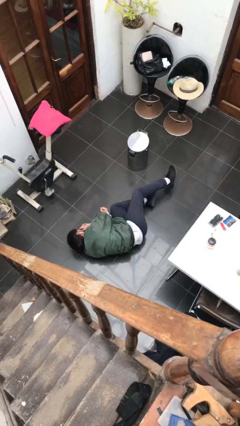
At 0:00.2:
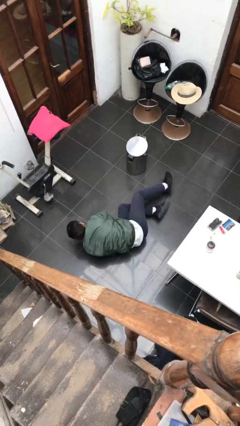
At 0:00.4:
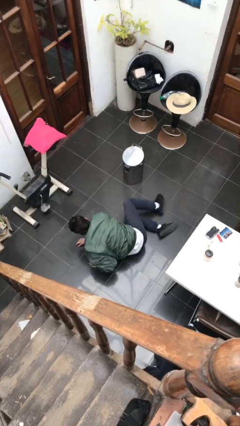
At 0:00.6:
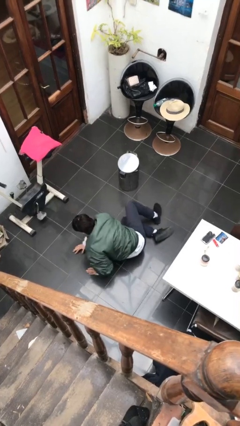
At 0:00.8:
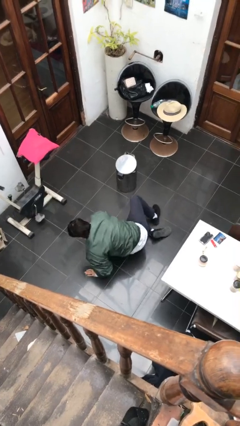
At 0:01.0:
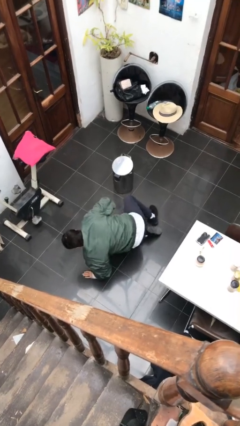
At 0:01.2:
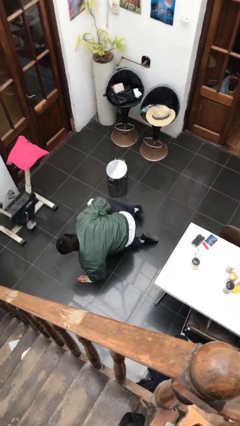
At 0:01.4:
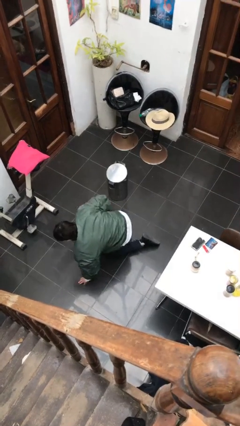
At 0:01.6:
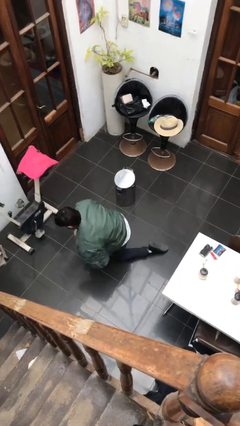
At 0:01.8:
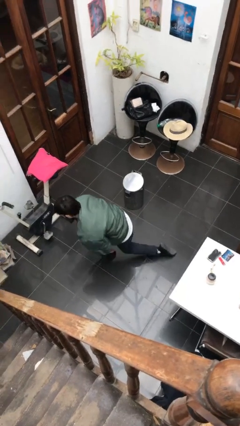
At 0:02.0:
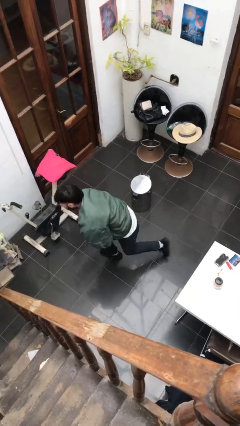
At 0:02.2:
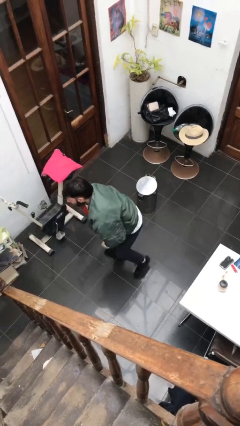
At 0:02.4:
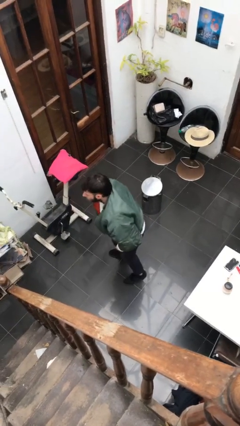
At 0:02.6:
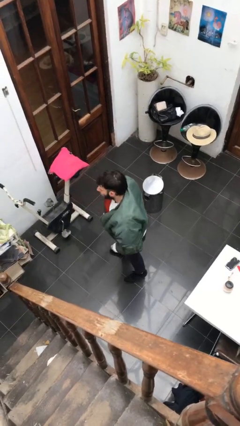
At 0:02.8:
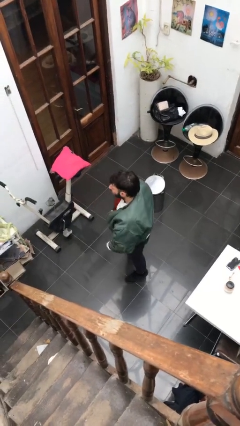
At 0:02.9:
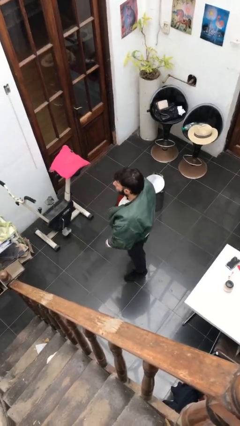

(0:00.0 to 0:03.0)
person stands up from floor

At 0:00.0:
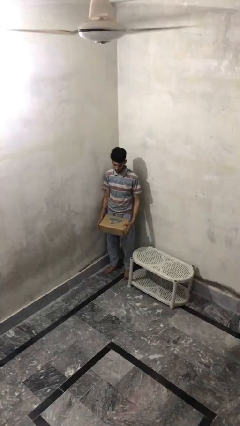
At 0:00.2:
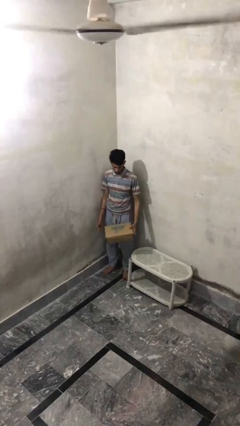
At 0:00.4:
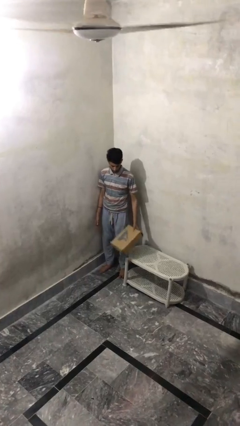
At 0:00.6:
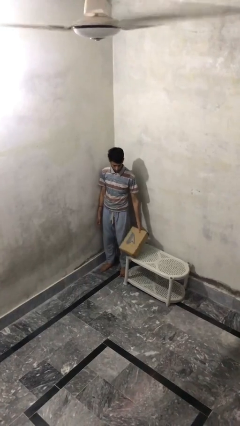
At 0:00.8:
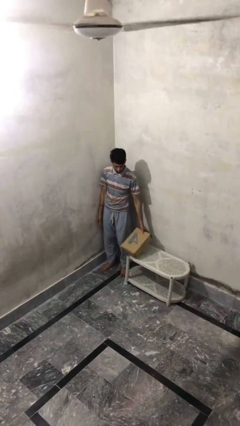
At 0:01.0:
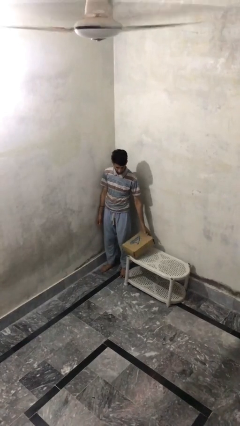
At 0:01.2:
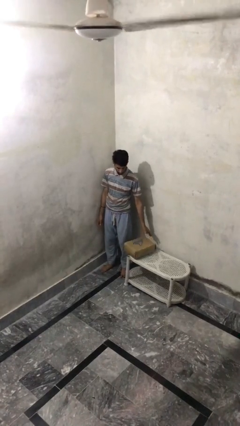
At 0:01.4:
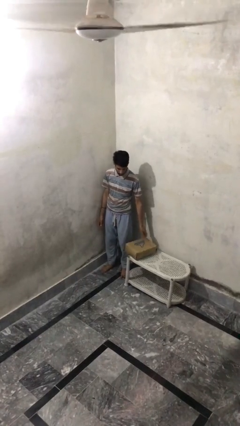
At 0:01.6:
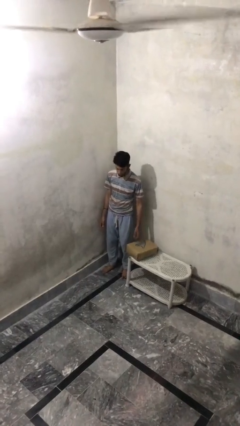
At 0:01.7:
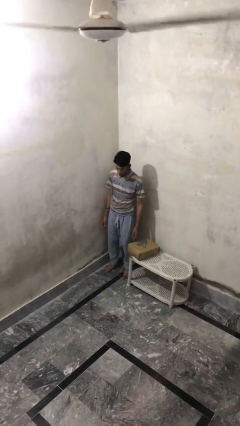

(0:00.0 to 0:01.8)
person puts down object on table

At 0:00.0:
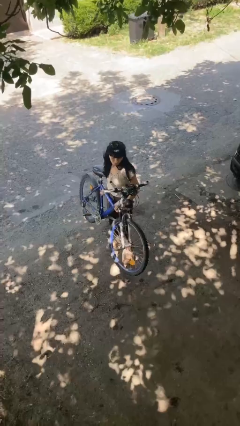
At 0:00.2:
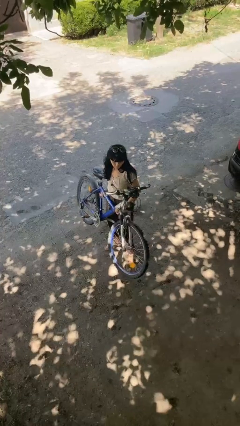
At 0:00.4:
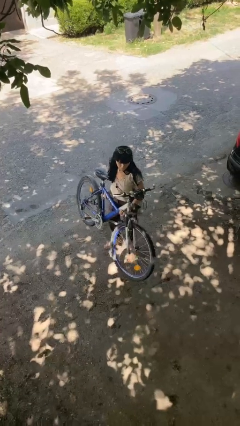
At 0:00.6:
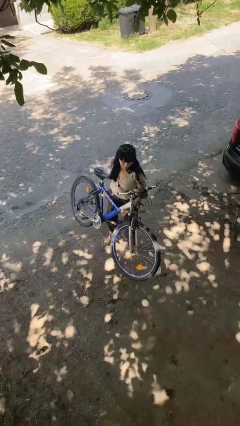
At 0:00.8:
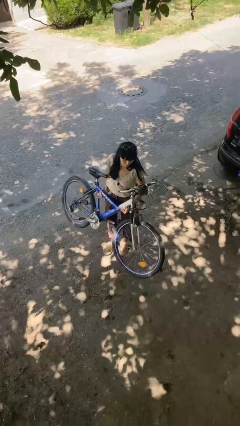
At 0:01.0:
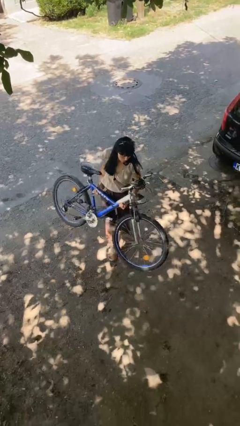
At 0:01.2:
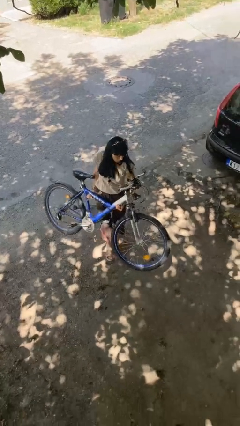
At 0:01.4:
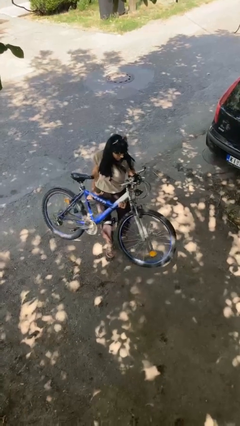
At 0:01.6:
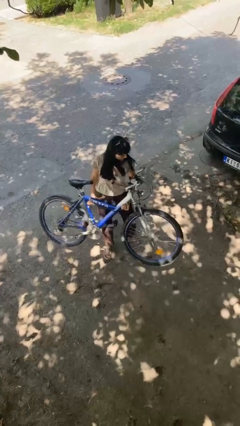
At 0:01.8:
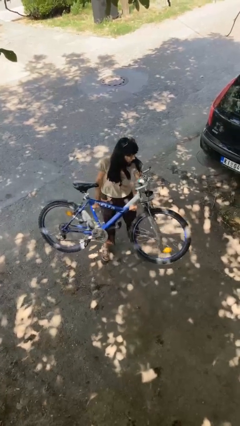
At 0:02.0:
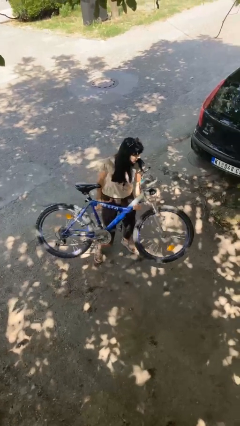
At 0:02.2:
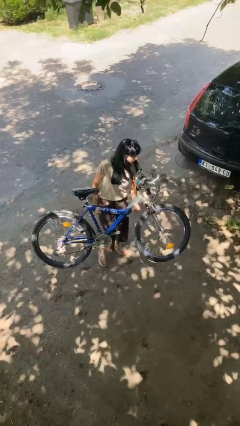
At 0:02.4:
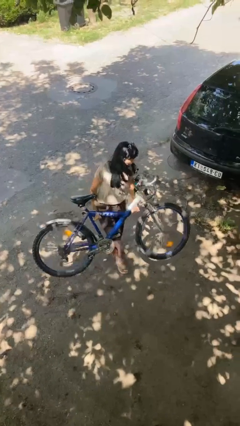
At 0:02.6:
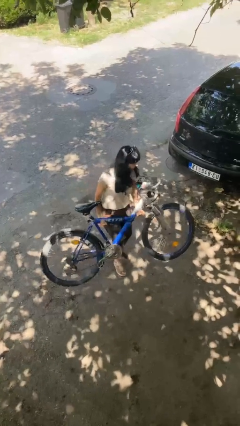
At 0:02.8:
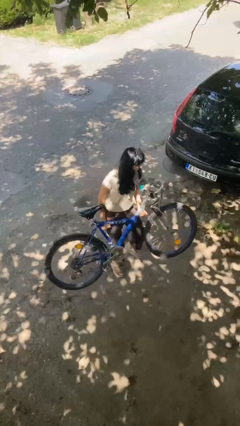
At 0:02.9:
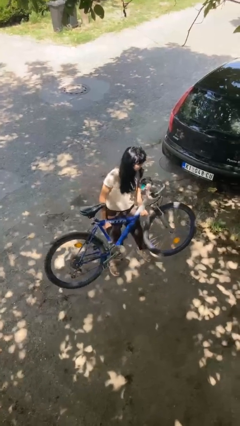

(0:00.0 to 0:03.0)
person carries bicycle

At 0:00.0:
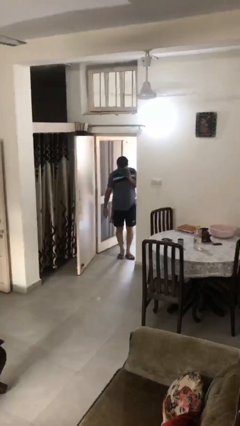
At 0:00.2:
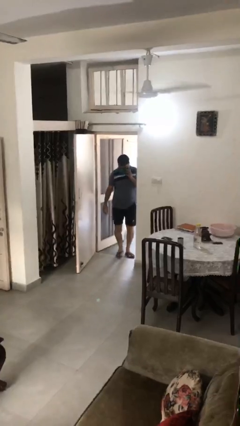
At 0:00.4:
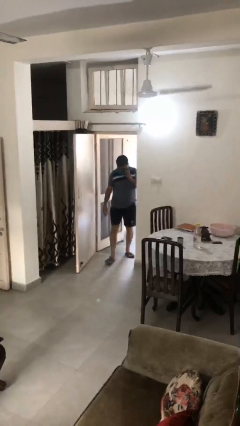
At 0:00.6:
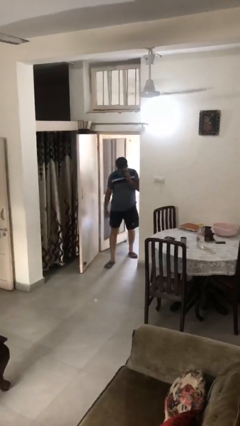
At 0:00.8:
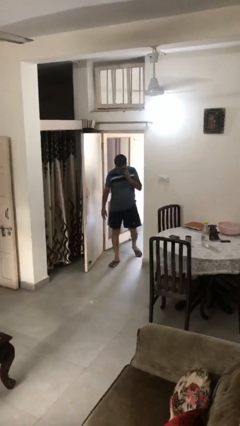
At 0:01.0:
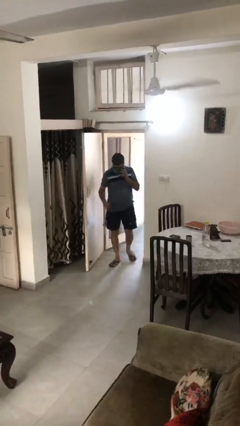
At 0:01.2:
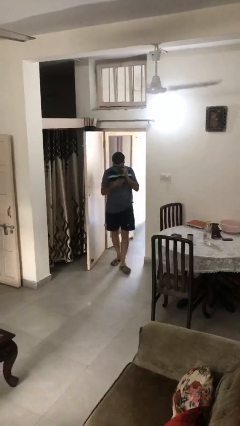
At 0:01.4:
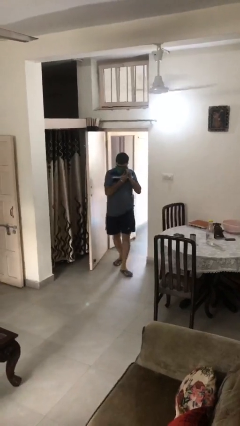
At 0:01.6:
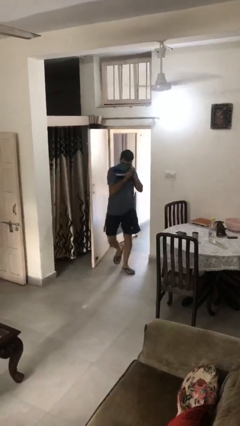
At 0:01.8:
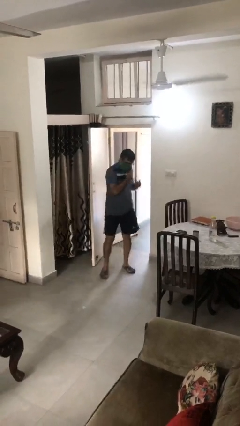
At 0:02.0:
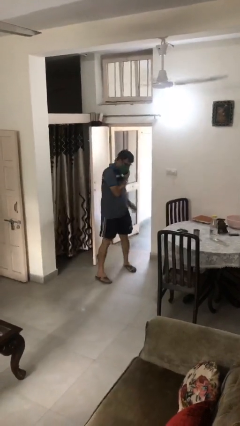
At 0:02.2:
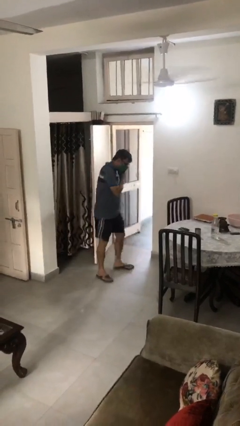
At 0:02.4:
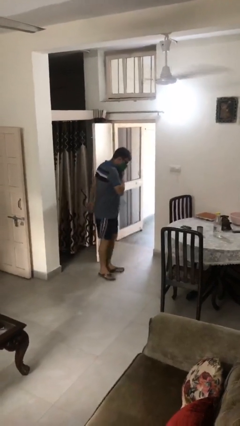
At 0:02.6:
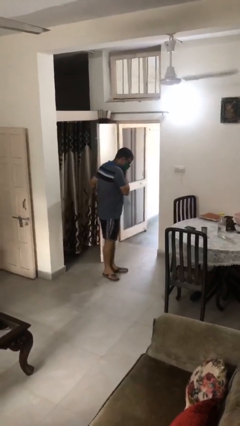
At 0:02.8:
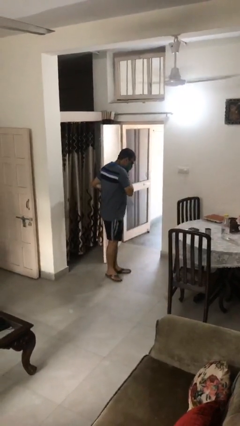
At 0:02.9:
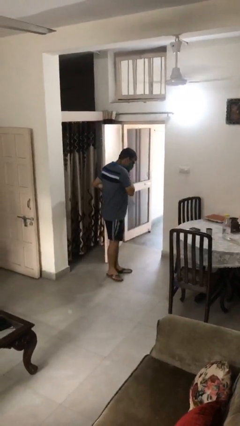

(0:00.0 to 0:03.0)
person enters scene through structure

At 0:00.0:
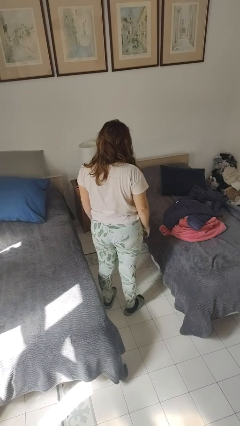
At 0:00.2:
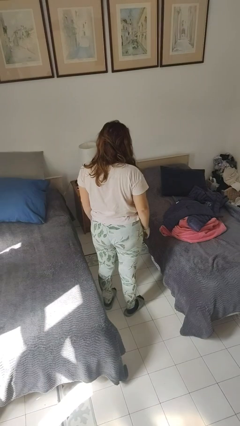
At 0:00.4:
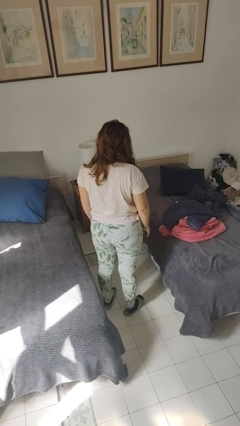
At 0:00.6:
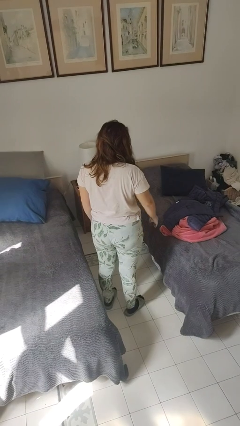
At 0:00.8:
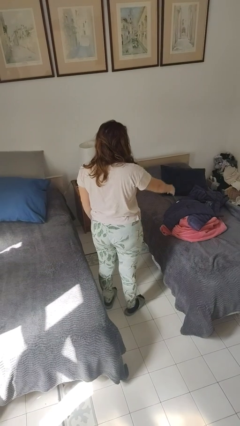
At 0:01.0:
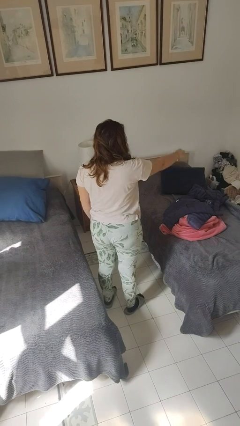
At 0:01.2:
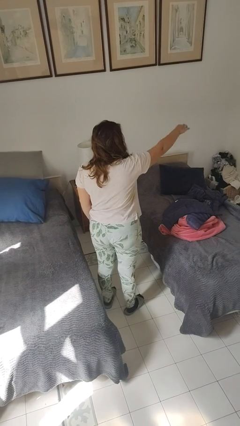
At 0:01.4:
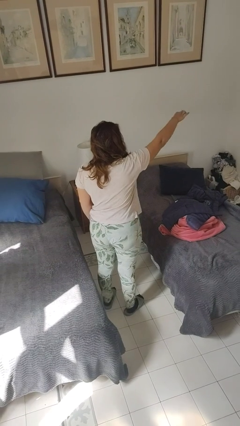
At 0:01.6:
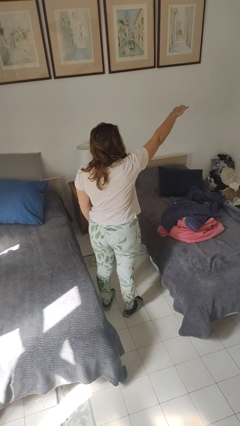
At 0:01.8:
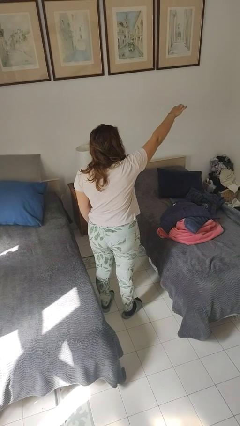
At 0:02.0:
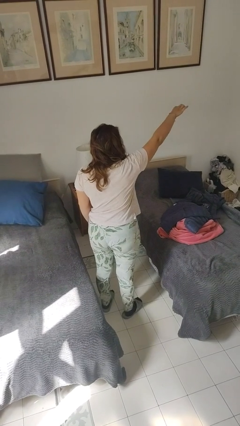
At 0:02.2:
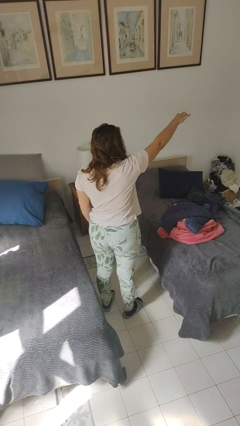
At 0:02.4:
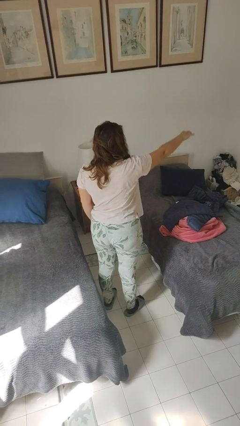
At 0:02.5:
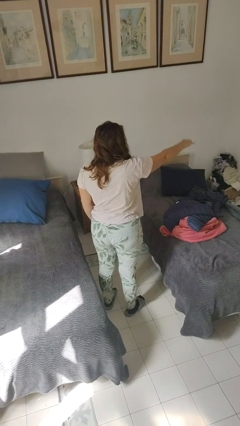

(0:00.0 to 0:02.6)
person gestures hang loose

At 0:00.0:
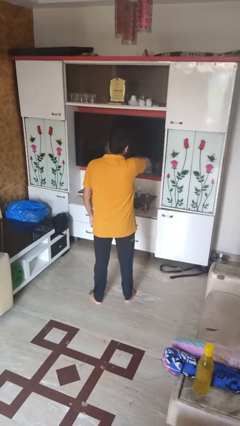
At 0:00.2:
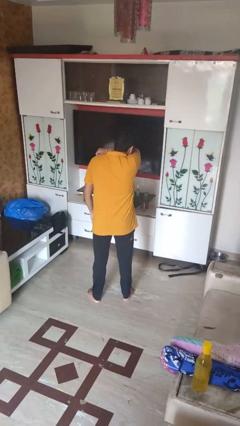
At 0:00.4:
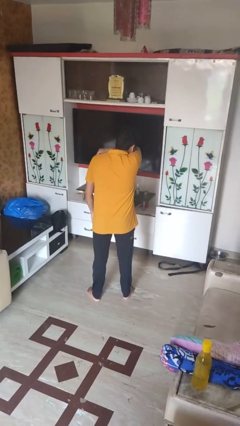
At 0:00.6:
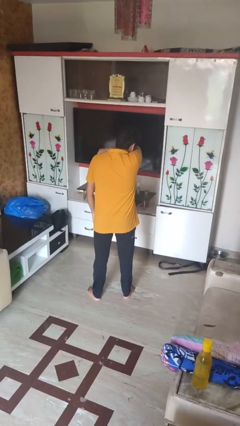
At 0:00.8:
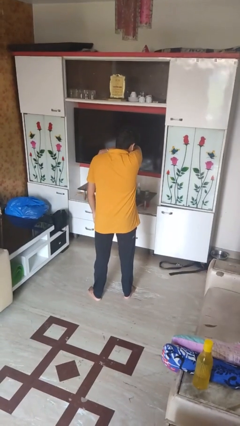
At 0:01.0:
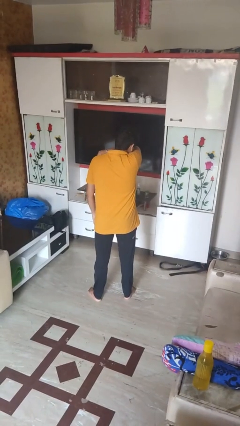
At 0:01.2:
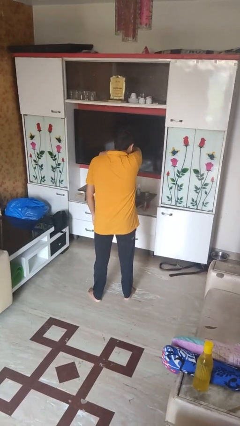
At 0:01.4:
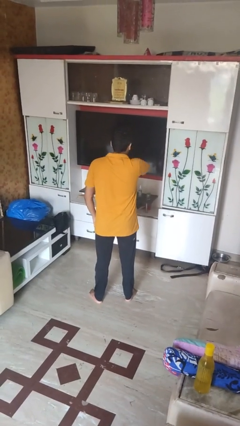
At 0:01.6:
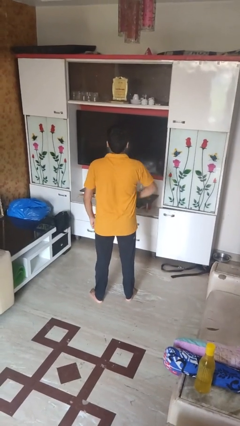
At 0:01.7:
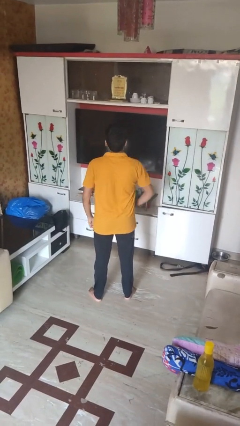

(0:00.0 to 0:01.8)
person sneezes into arm

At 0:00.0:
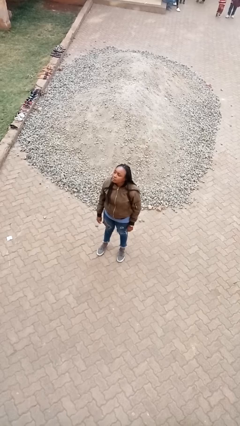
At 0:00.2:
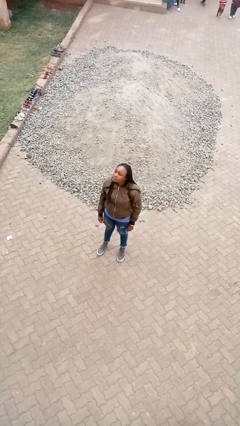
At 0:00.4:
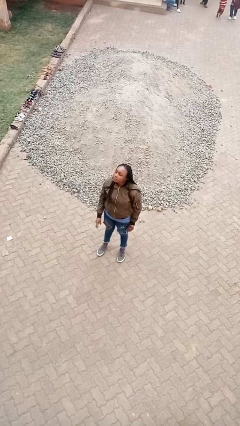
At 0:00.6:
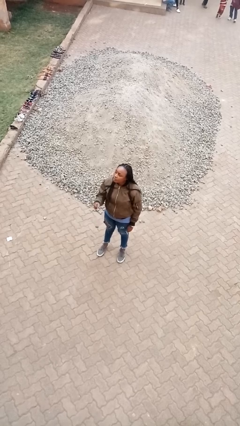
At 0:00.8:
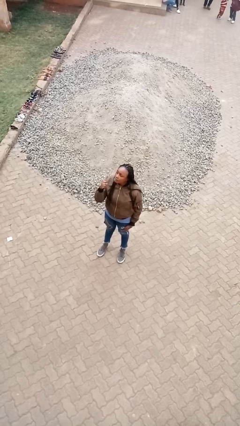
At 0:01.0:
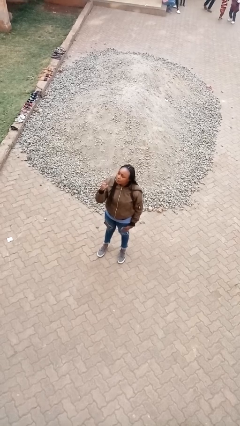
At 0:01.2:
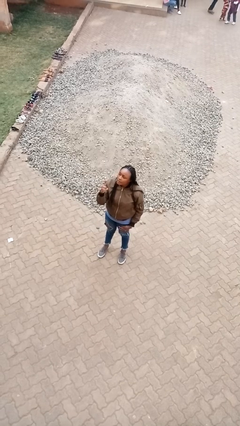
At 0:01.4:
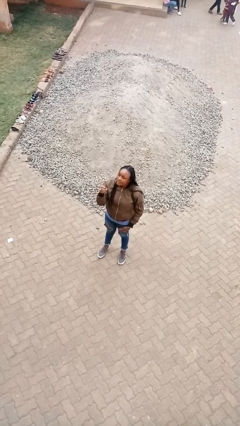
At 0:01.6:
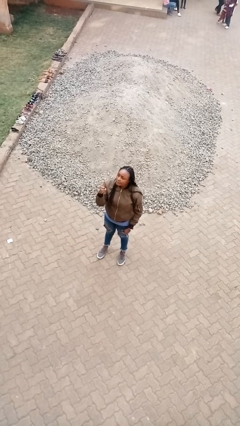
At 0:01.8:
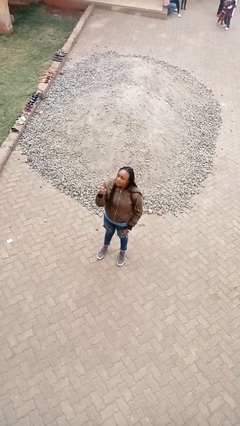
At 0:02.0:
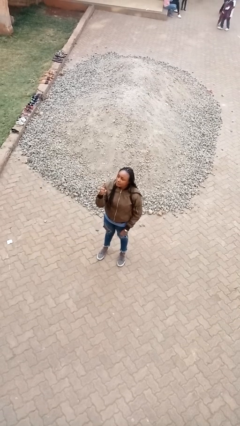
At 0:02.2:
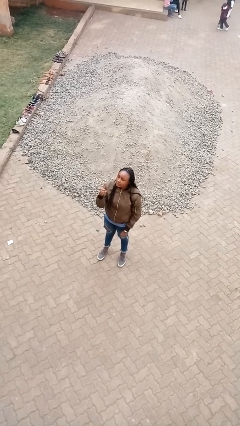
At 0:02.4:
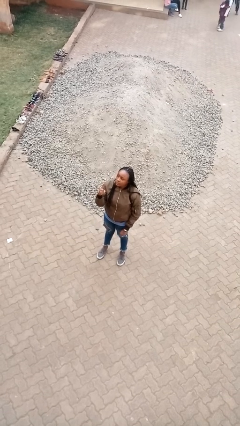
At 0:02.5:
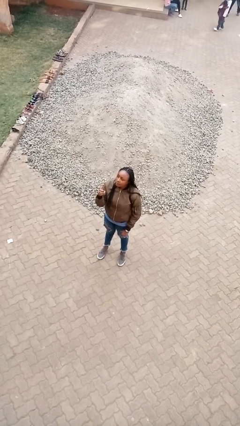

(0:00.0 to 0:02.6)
person gestures number one
